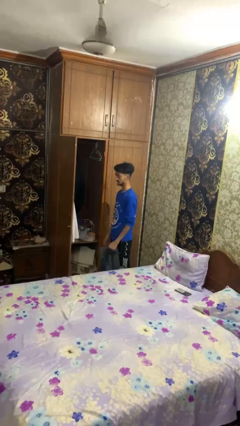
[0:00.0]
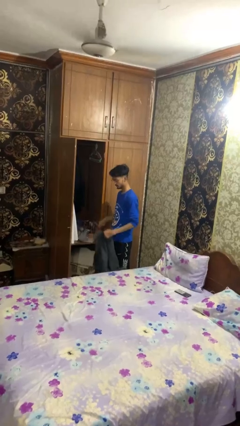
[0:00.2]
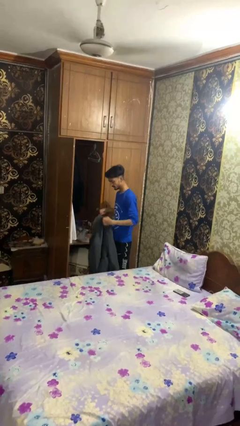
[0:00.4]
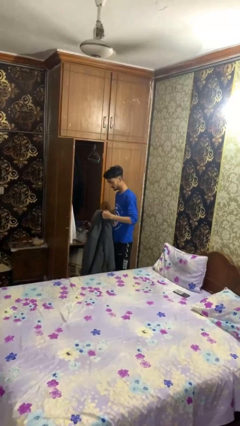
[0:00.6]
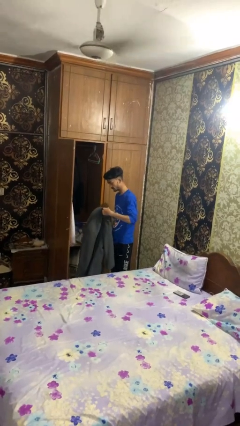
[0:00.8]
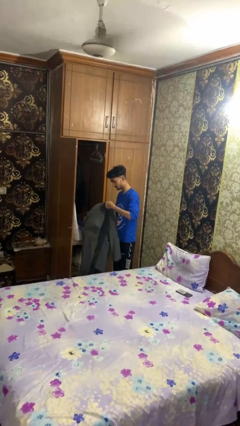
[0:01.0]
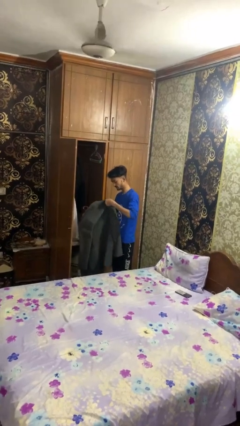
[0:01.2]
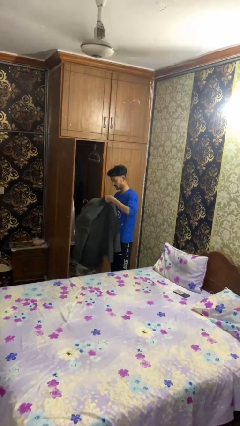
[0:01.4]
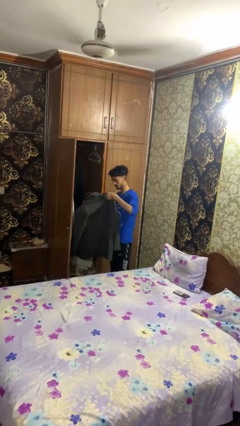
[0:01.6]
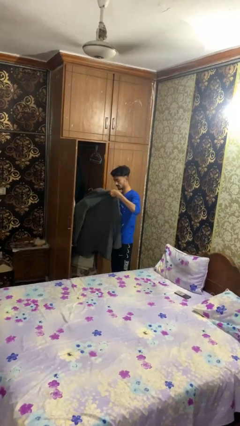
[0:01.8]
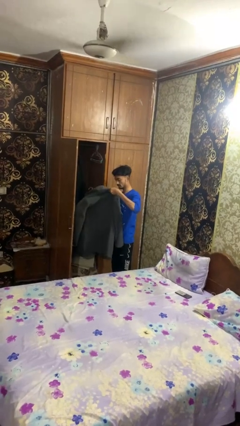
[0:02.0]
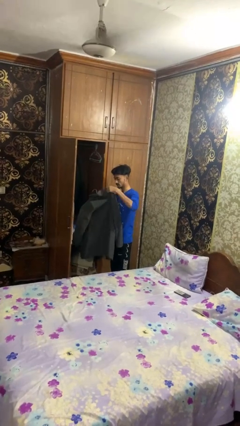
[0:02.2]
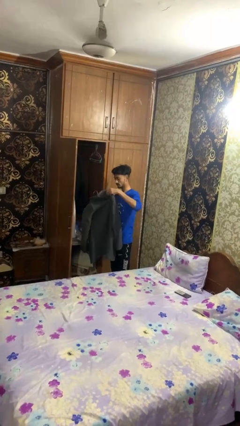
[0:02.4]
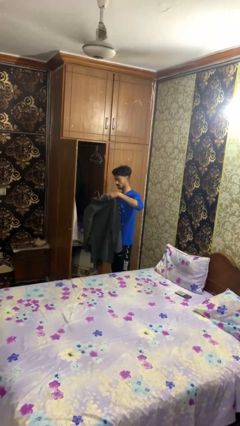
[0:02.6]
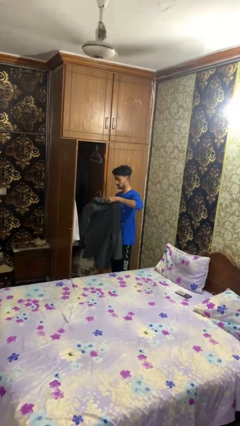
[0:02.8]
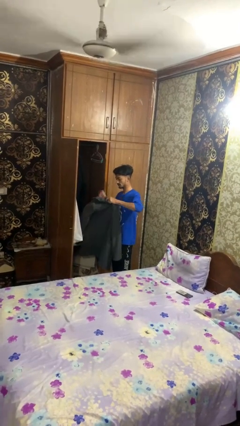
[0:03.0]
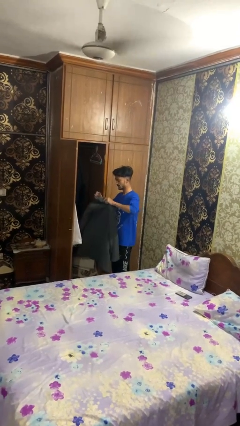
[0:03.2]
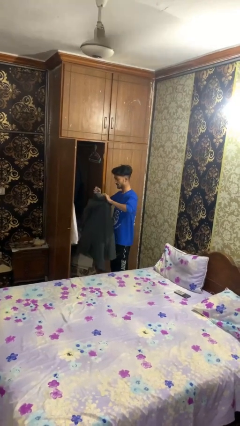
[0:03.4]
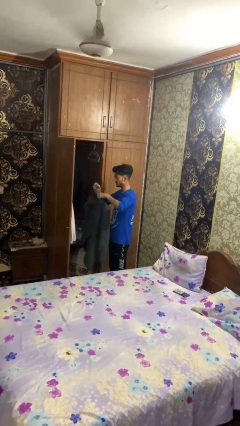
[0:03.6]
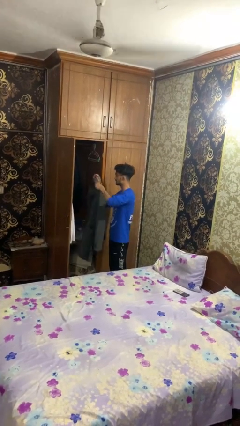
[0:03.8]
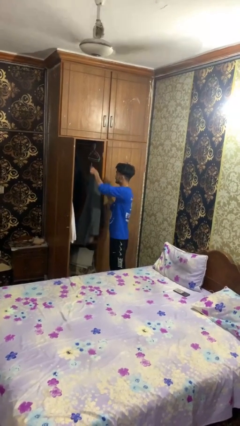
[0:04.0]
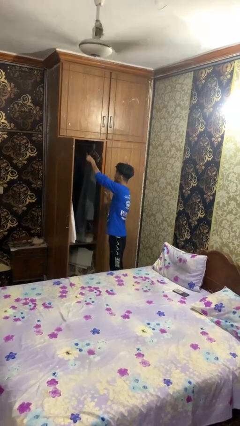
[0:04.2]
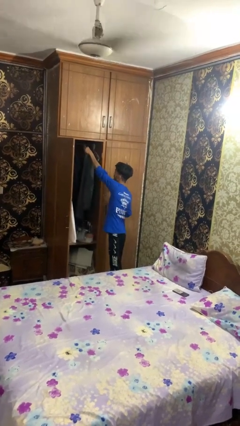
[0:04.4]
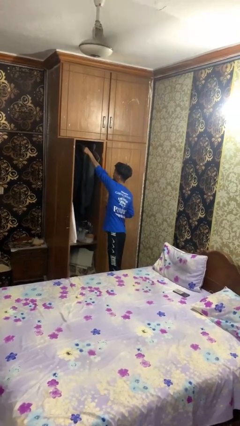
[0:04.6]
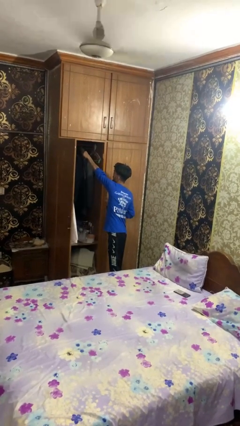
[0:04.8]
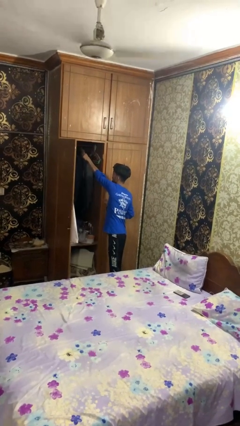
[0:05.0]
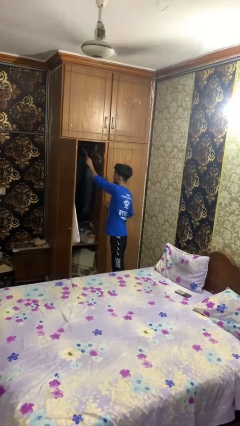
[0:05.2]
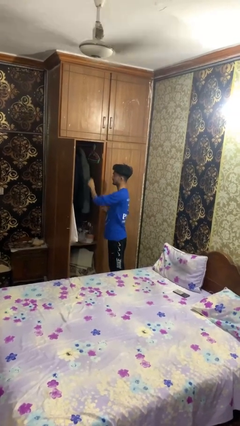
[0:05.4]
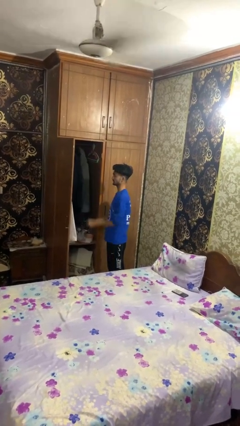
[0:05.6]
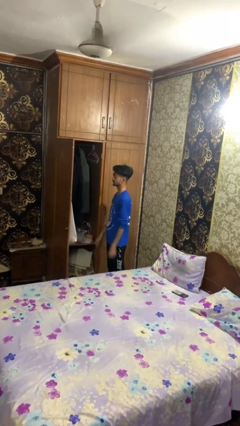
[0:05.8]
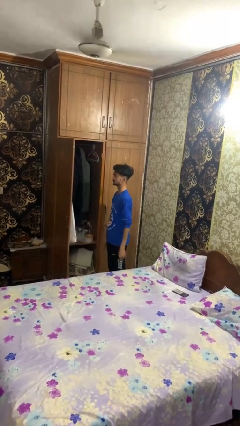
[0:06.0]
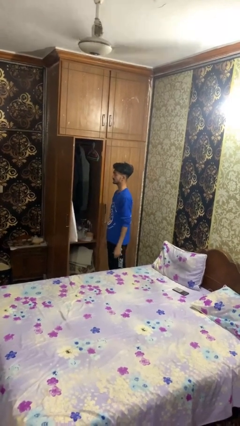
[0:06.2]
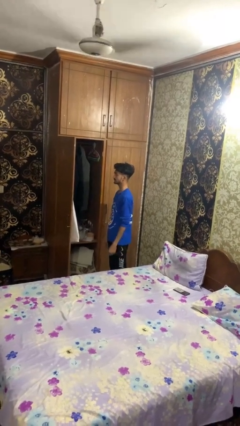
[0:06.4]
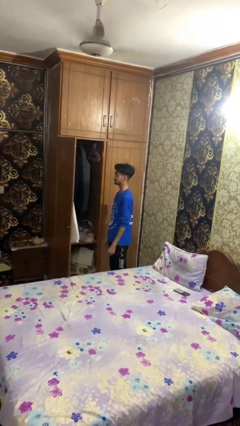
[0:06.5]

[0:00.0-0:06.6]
person puts clothes into closet

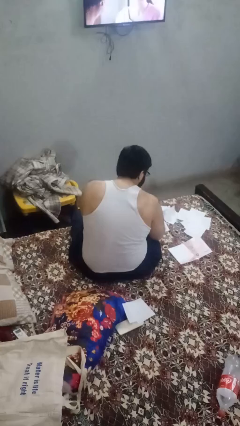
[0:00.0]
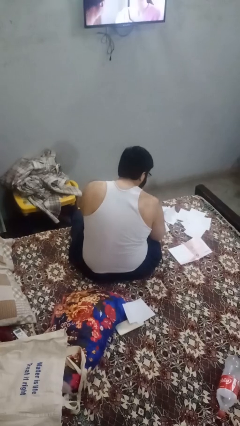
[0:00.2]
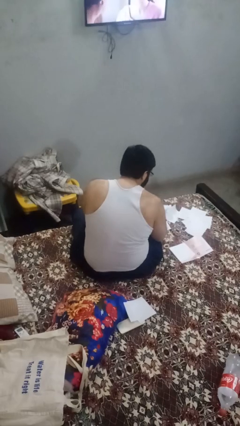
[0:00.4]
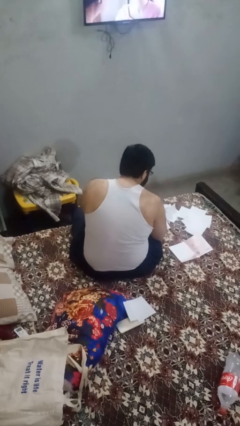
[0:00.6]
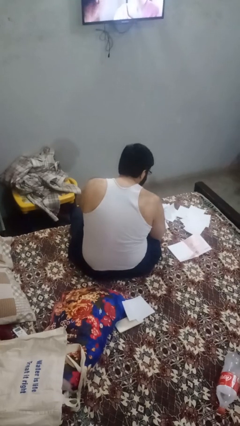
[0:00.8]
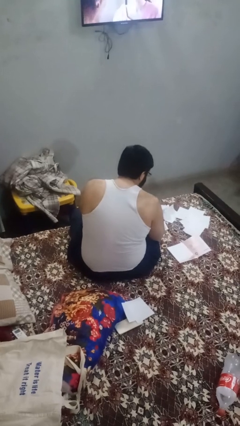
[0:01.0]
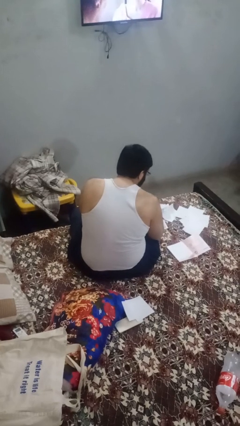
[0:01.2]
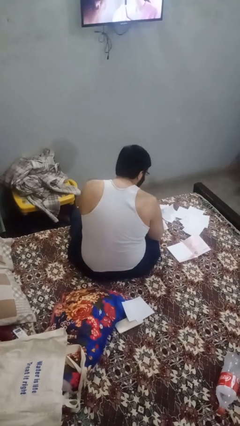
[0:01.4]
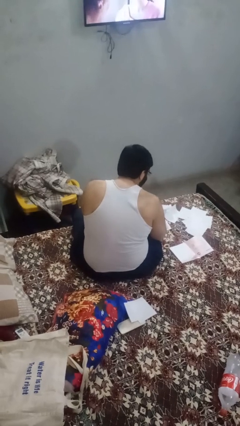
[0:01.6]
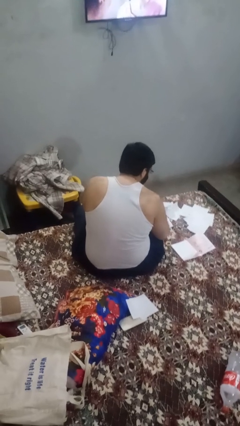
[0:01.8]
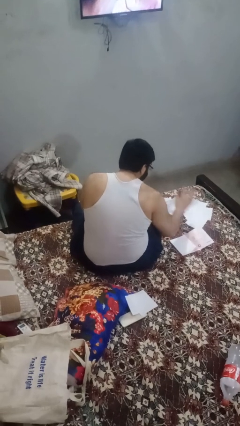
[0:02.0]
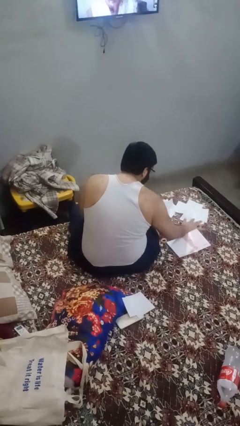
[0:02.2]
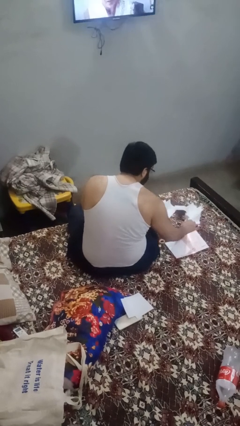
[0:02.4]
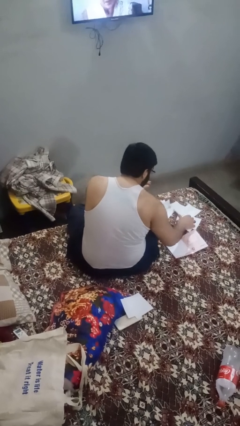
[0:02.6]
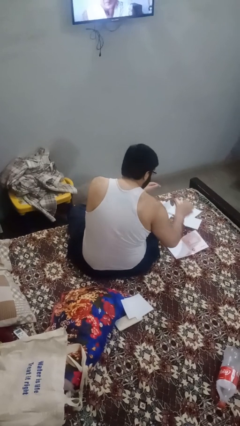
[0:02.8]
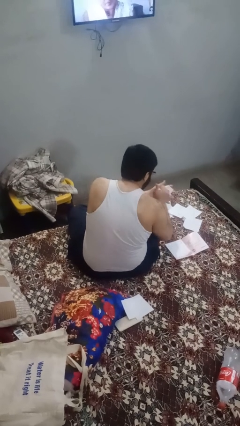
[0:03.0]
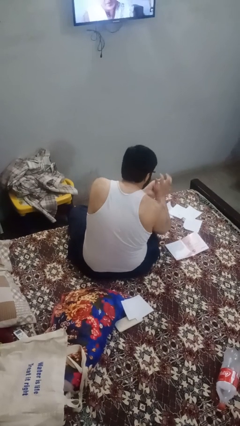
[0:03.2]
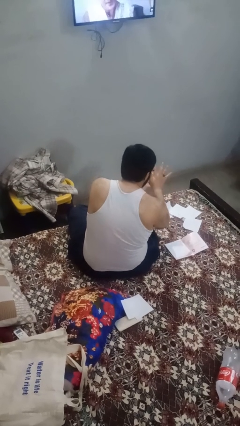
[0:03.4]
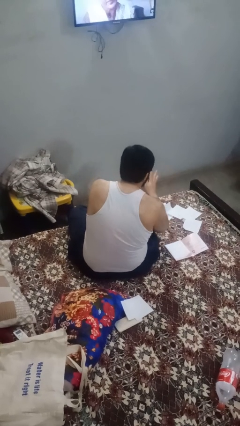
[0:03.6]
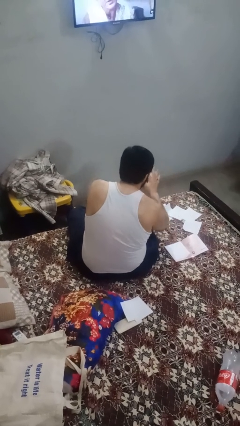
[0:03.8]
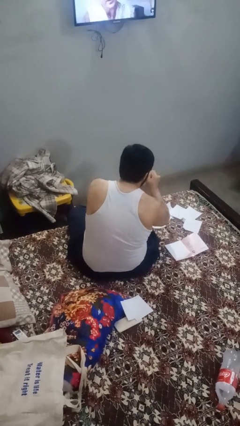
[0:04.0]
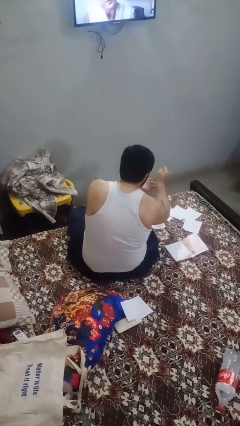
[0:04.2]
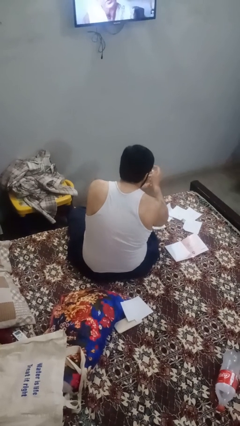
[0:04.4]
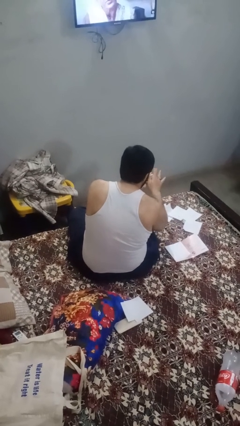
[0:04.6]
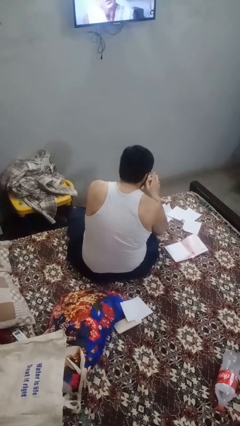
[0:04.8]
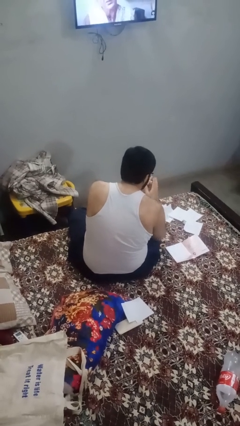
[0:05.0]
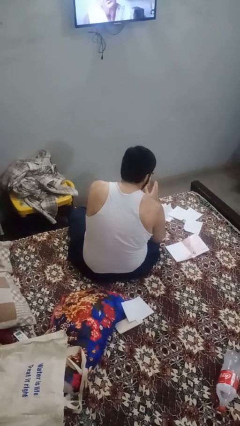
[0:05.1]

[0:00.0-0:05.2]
person crumples paper

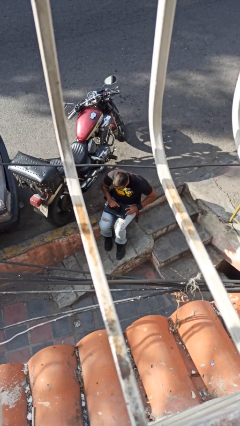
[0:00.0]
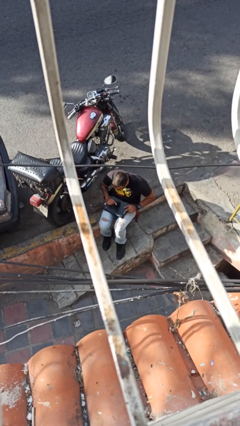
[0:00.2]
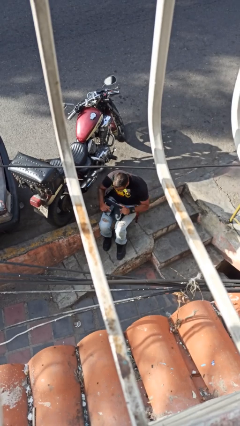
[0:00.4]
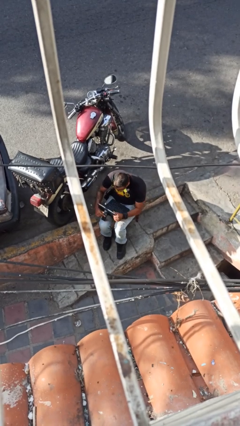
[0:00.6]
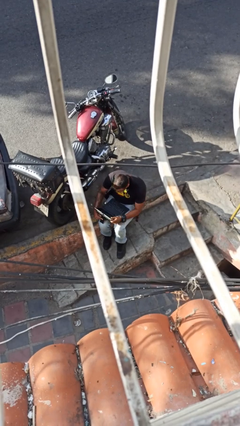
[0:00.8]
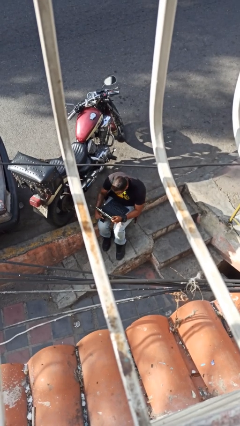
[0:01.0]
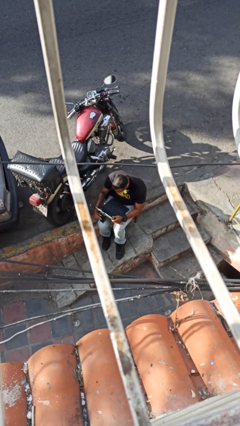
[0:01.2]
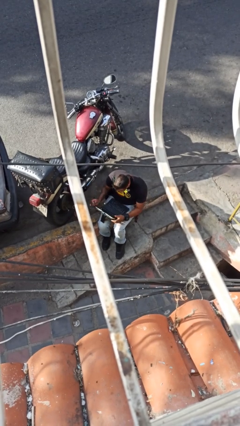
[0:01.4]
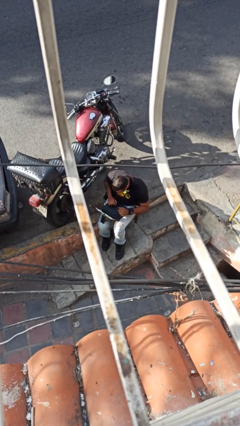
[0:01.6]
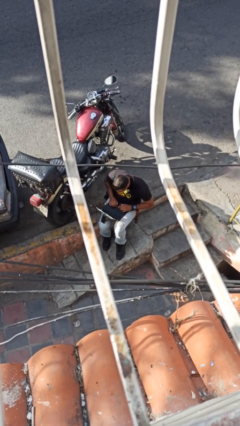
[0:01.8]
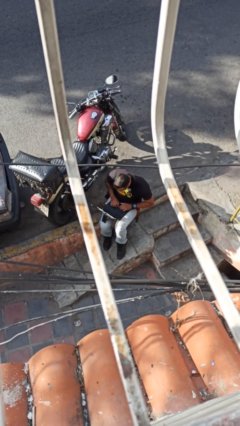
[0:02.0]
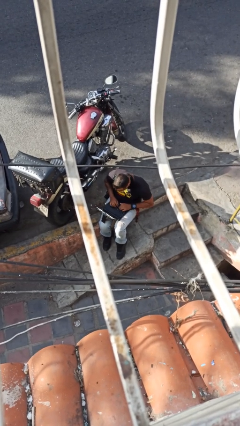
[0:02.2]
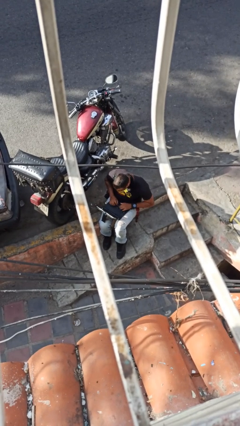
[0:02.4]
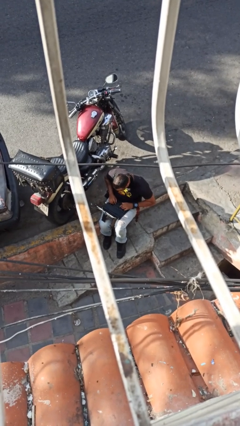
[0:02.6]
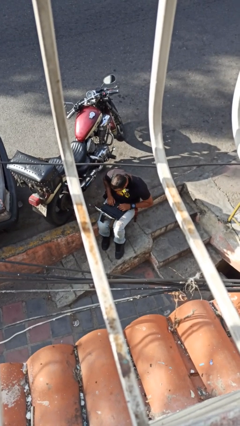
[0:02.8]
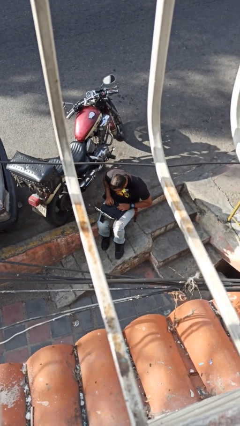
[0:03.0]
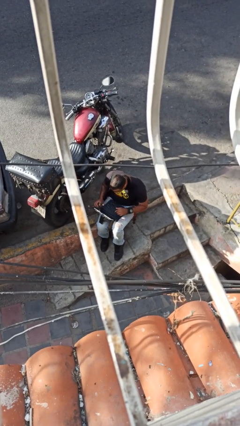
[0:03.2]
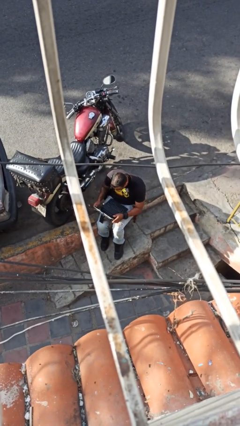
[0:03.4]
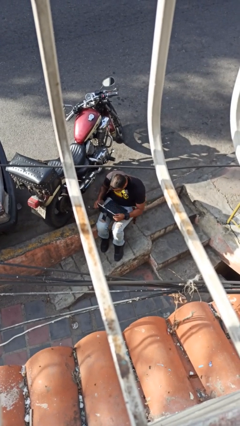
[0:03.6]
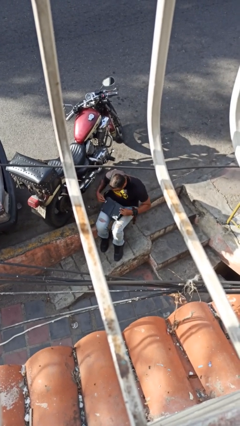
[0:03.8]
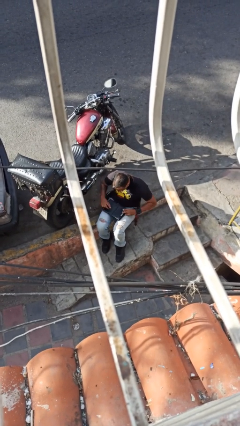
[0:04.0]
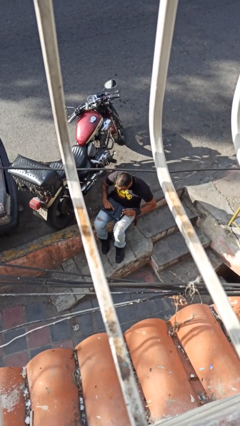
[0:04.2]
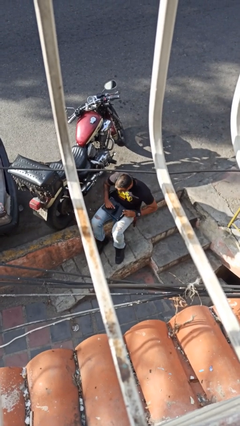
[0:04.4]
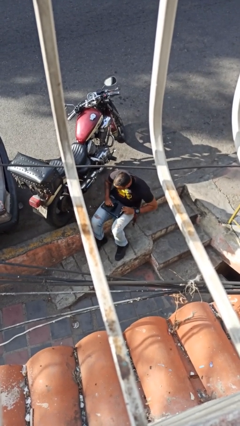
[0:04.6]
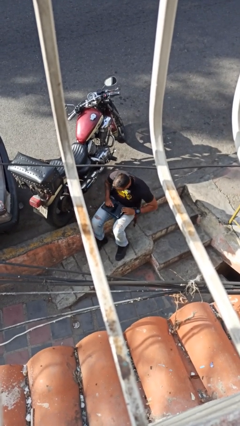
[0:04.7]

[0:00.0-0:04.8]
person interacts with laptop

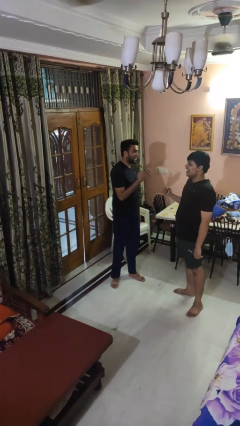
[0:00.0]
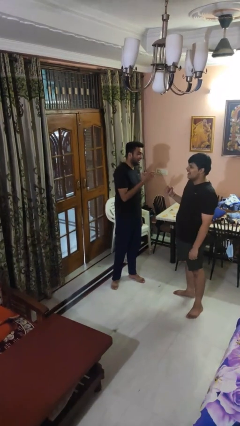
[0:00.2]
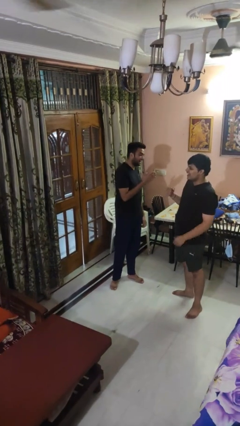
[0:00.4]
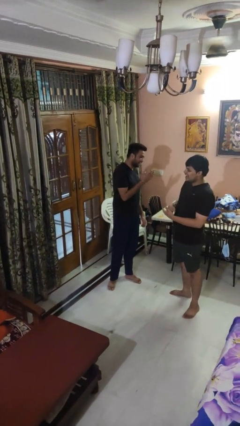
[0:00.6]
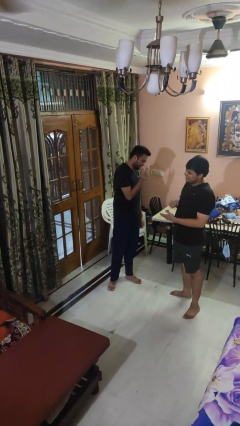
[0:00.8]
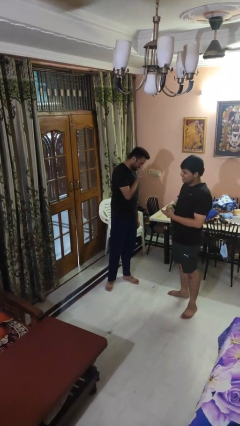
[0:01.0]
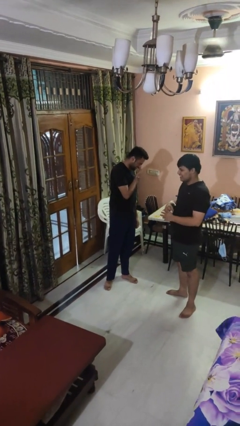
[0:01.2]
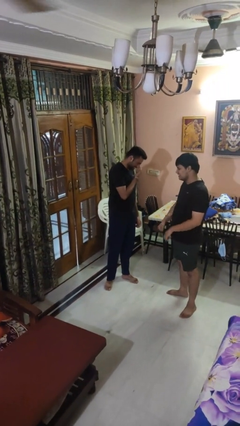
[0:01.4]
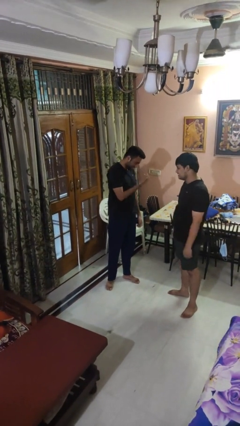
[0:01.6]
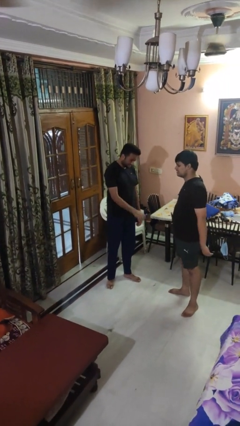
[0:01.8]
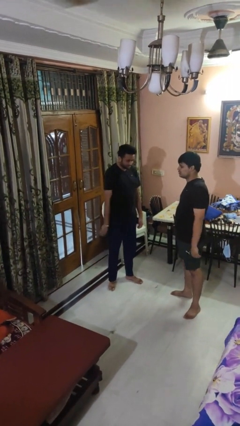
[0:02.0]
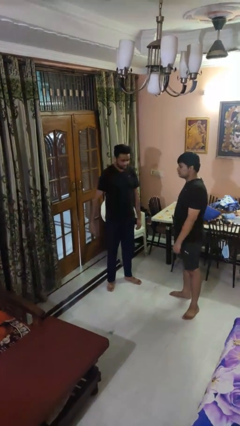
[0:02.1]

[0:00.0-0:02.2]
person laughs with person
